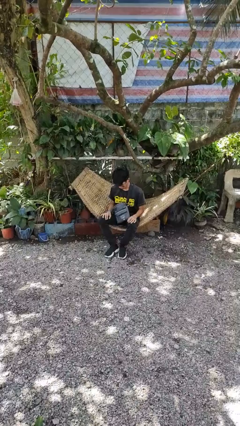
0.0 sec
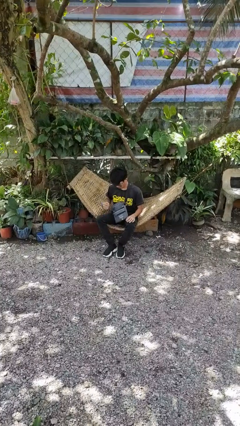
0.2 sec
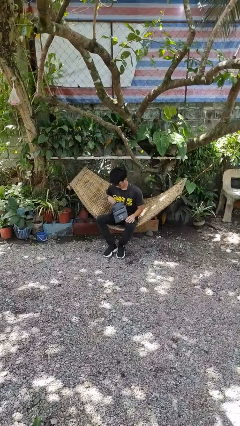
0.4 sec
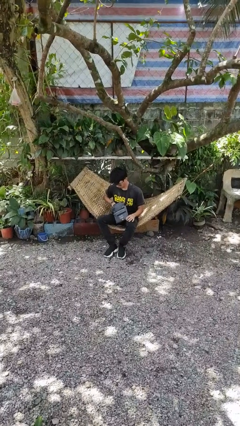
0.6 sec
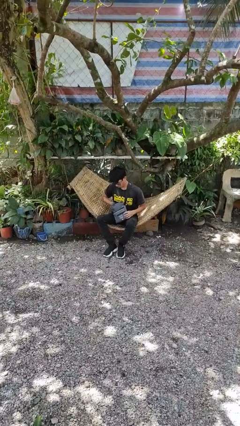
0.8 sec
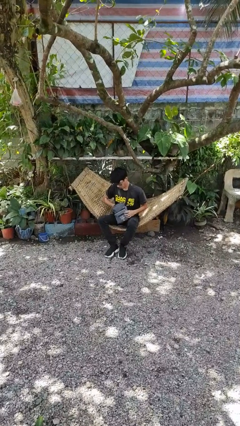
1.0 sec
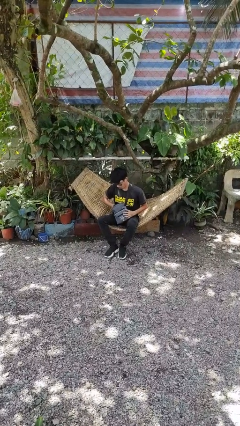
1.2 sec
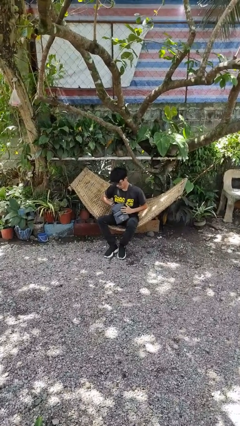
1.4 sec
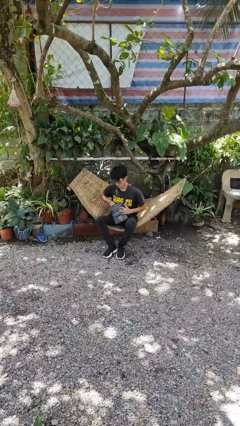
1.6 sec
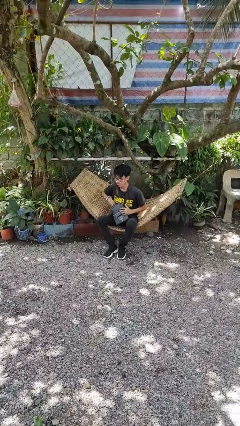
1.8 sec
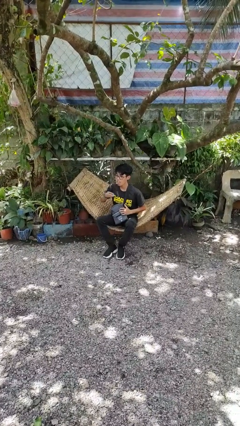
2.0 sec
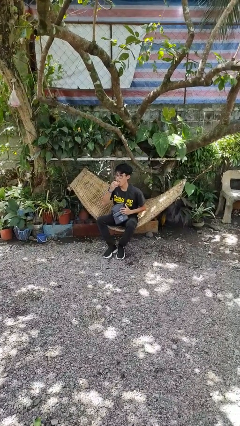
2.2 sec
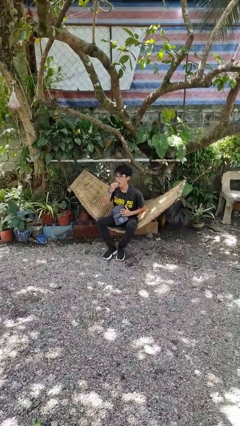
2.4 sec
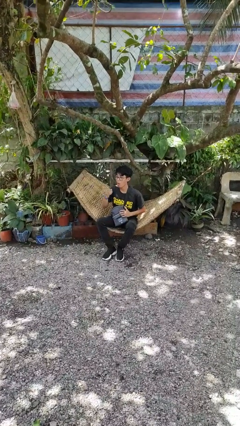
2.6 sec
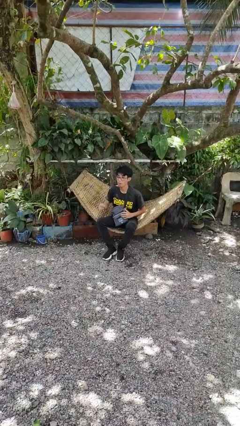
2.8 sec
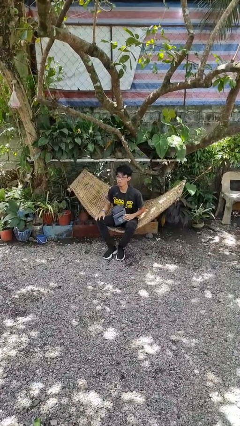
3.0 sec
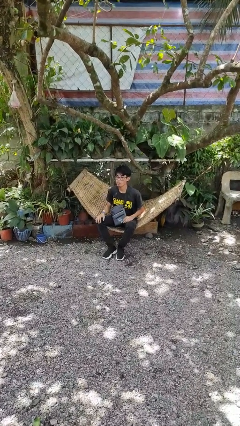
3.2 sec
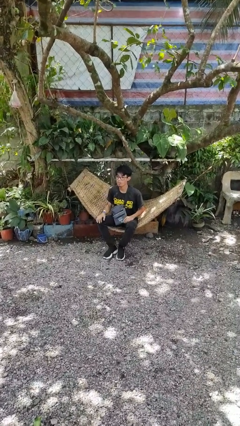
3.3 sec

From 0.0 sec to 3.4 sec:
person eats snack from bag

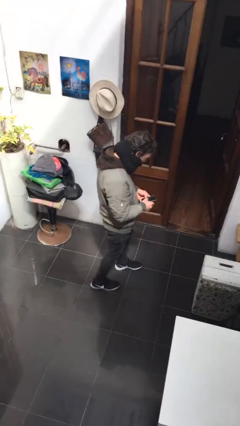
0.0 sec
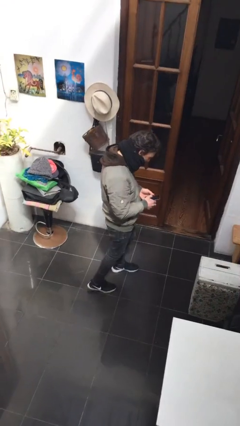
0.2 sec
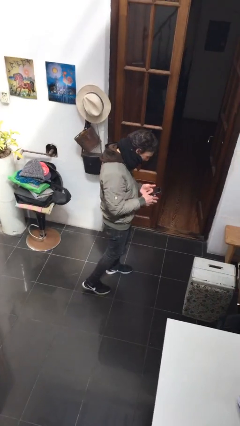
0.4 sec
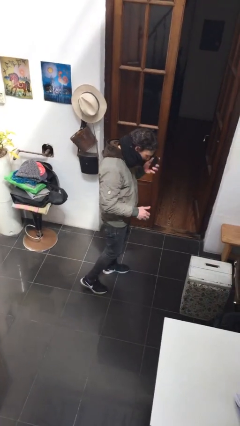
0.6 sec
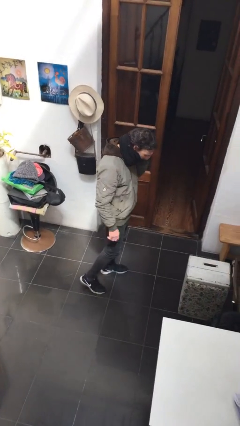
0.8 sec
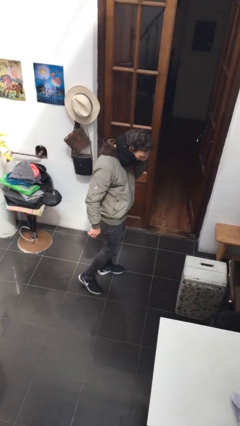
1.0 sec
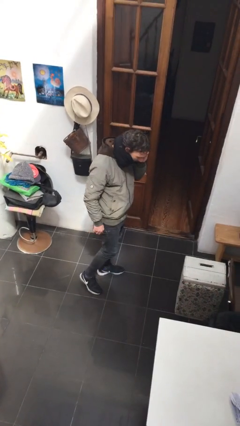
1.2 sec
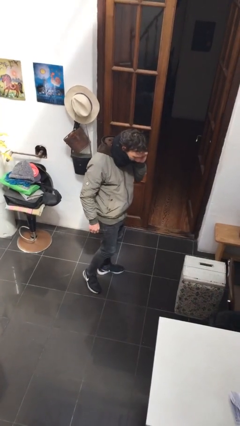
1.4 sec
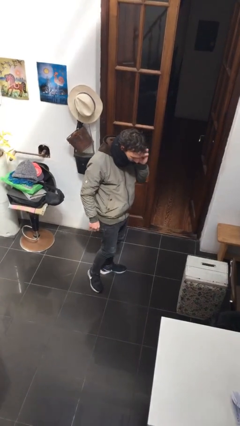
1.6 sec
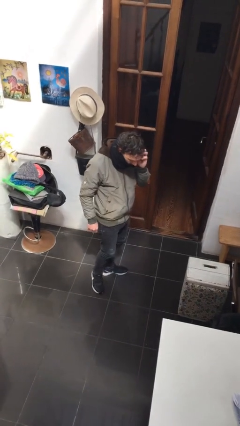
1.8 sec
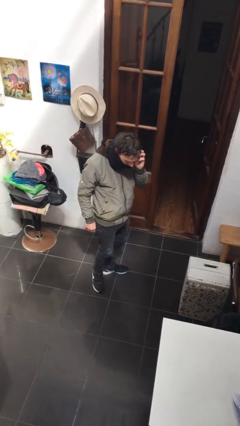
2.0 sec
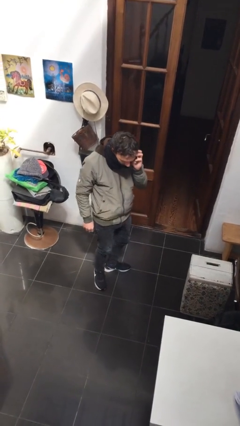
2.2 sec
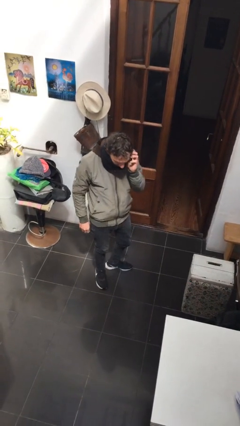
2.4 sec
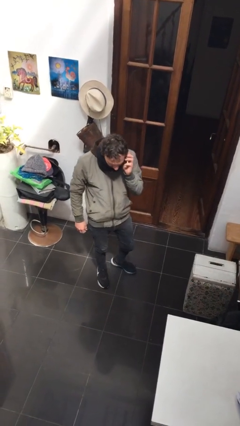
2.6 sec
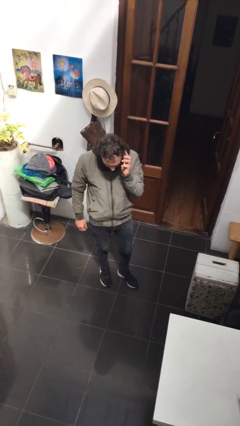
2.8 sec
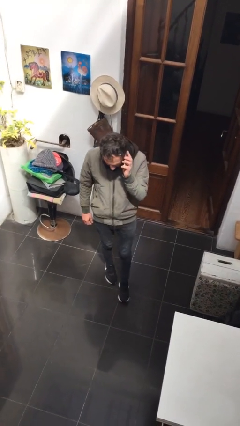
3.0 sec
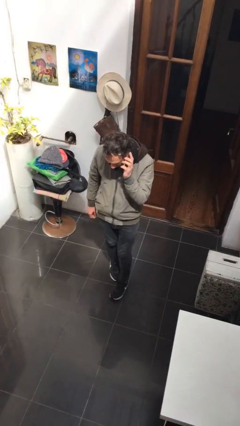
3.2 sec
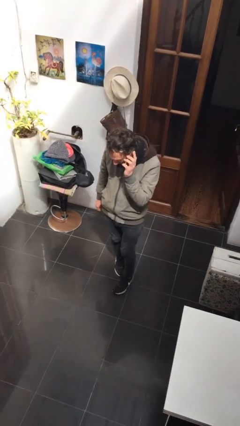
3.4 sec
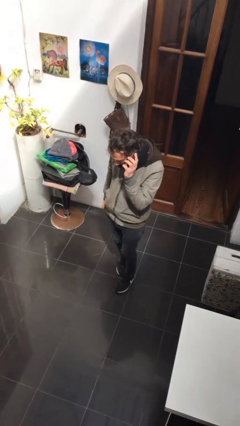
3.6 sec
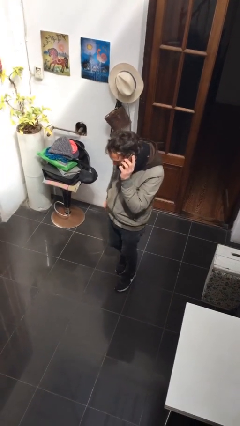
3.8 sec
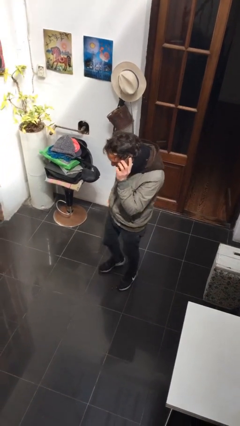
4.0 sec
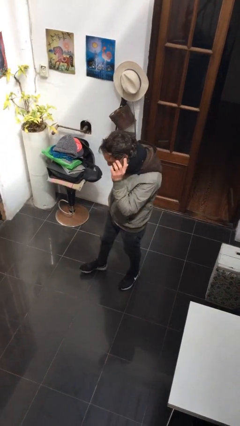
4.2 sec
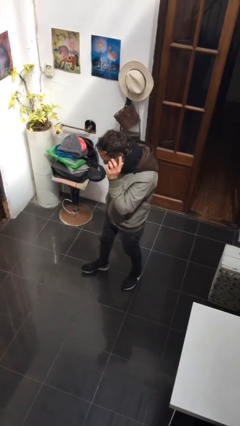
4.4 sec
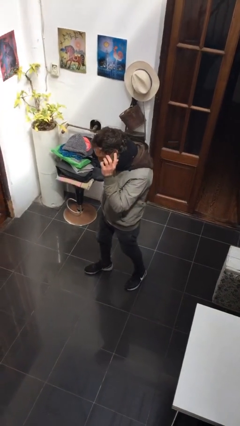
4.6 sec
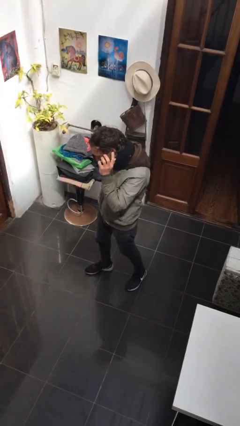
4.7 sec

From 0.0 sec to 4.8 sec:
person talks on phone

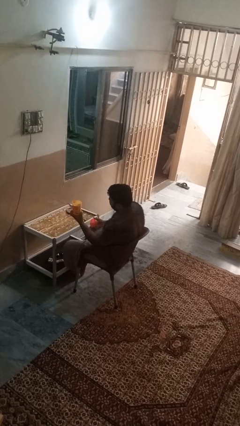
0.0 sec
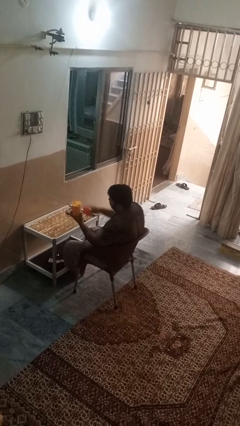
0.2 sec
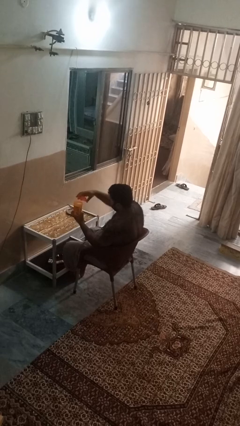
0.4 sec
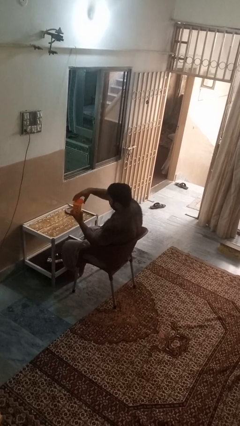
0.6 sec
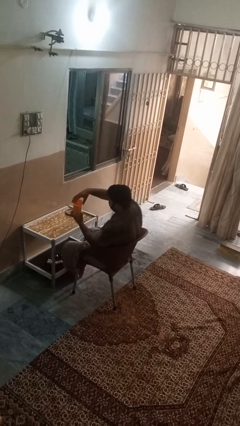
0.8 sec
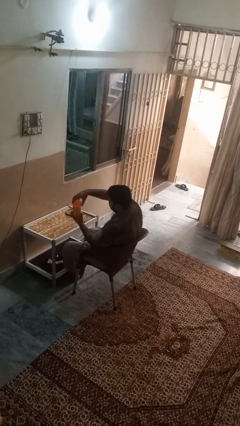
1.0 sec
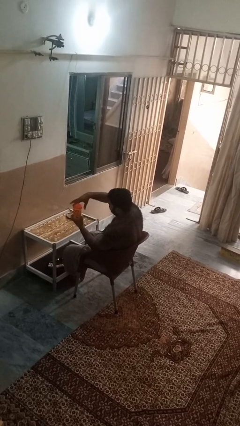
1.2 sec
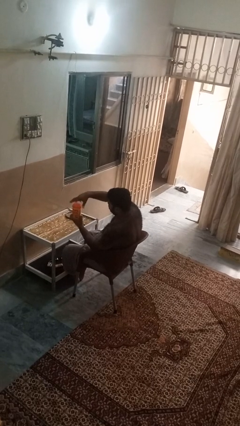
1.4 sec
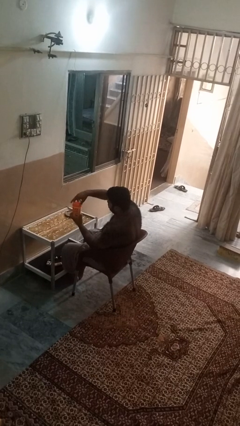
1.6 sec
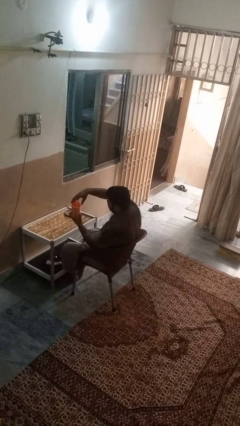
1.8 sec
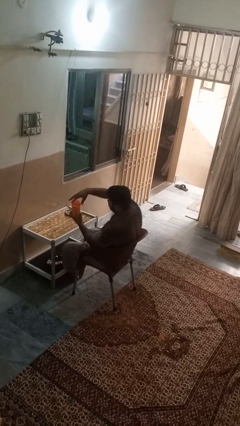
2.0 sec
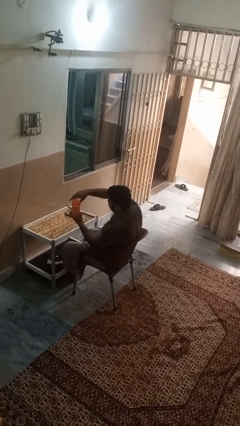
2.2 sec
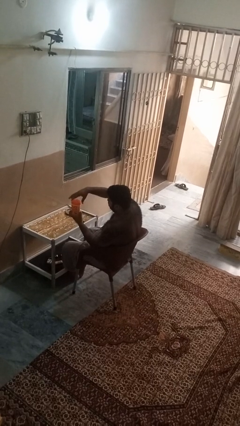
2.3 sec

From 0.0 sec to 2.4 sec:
person closes jar

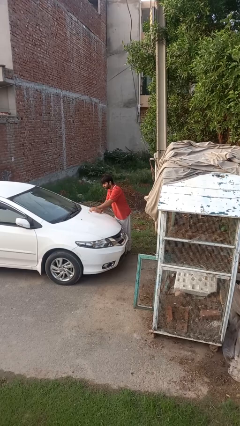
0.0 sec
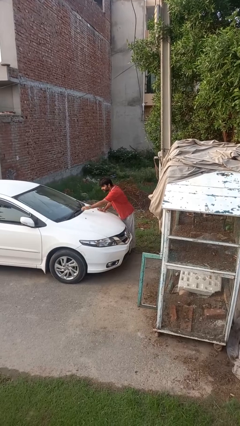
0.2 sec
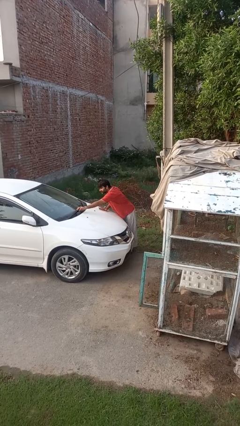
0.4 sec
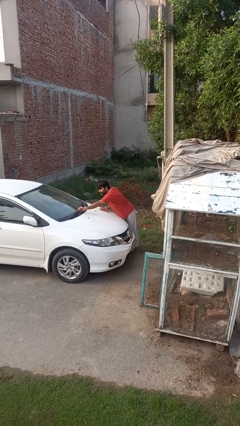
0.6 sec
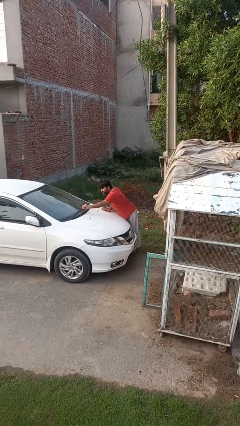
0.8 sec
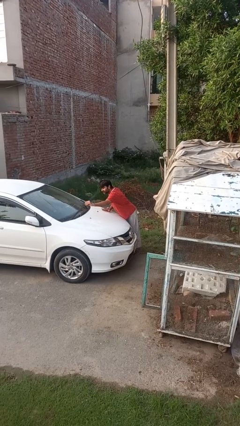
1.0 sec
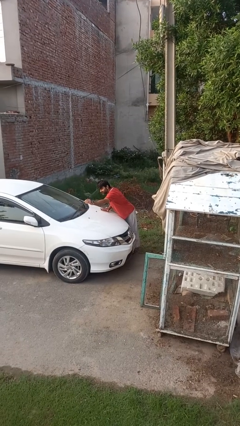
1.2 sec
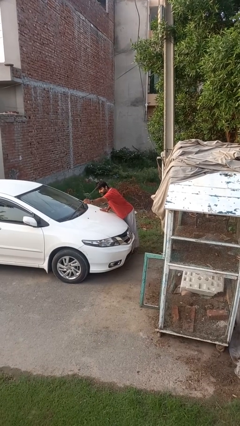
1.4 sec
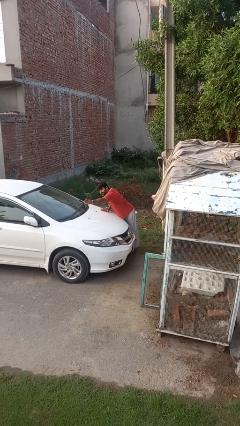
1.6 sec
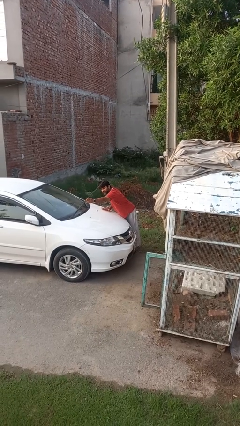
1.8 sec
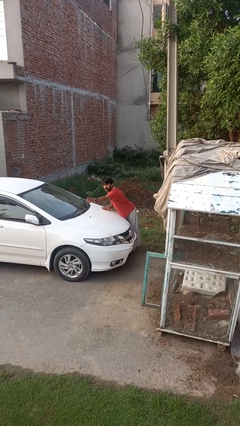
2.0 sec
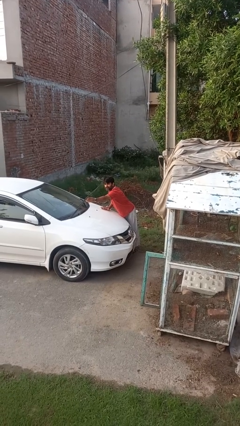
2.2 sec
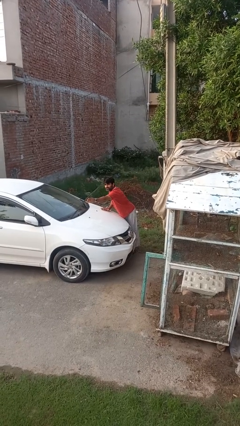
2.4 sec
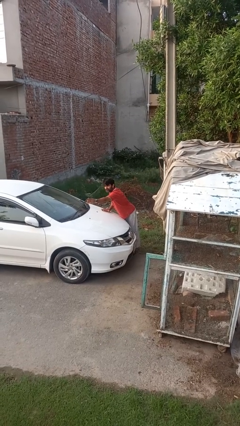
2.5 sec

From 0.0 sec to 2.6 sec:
person flips up car wipers

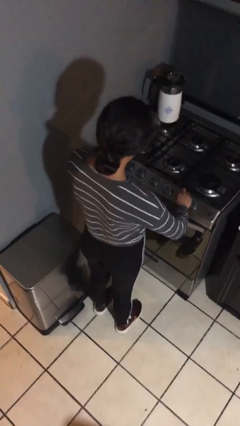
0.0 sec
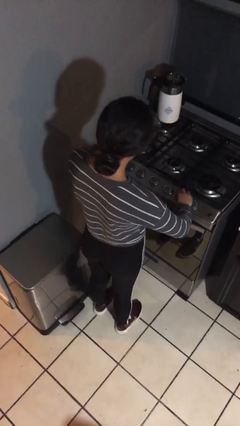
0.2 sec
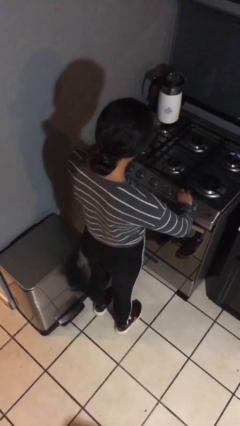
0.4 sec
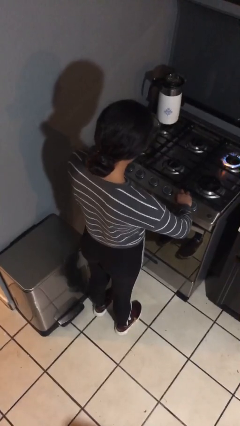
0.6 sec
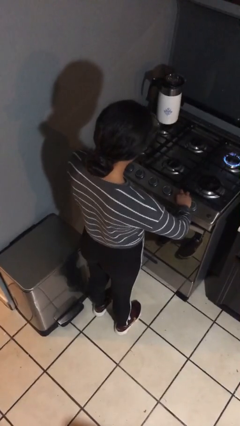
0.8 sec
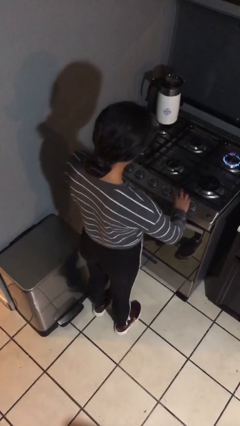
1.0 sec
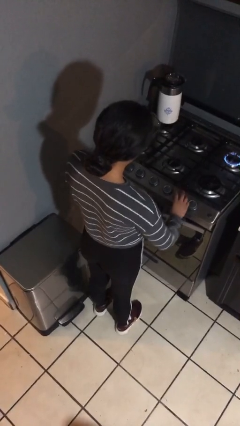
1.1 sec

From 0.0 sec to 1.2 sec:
person turns on stovetop

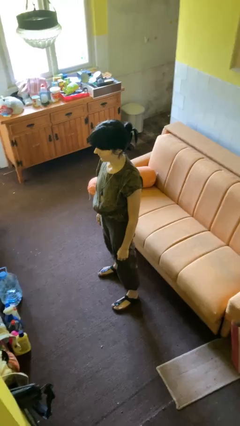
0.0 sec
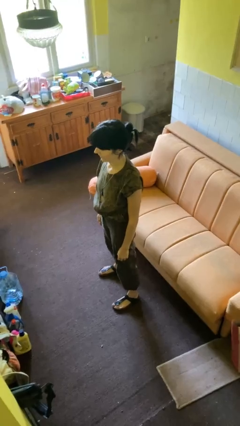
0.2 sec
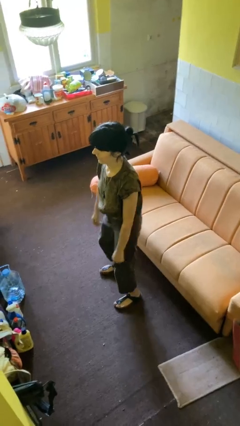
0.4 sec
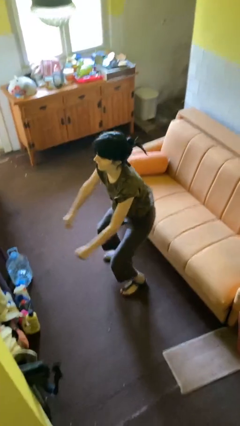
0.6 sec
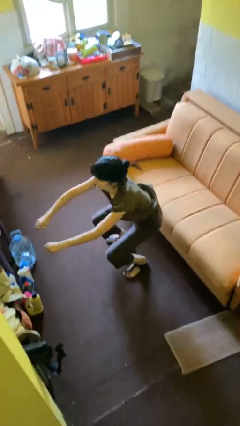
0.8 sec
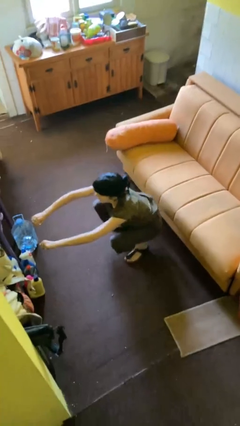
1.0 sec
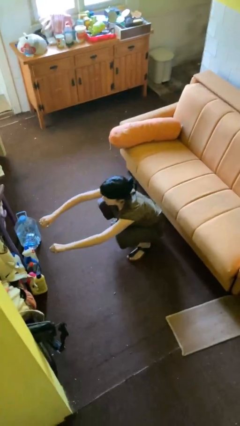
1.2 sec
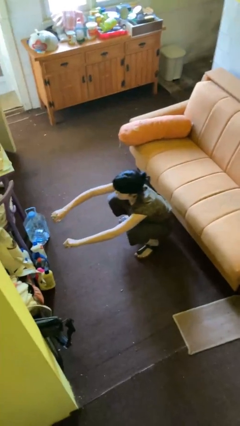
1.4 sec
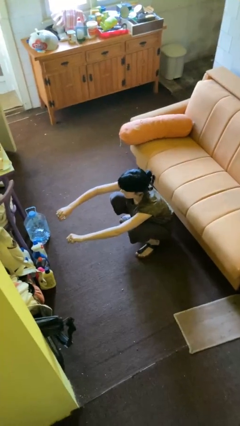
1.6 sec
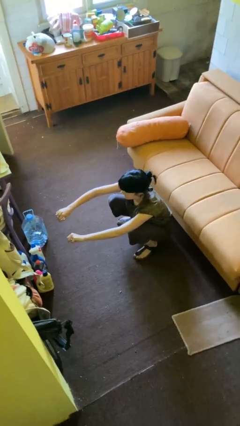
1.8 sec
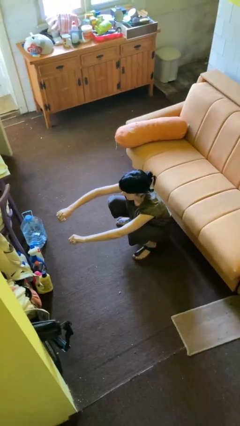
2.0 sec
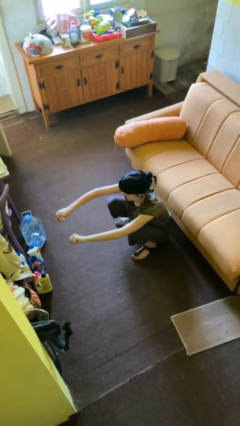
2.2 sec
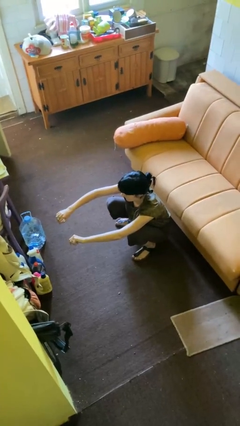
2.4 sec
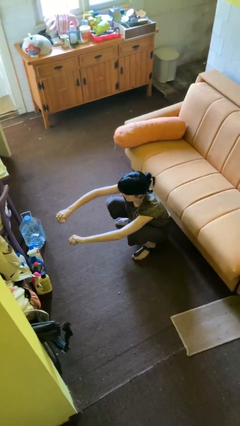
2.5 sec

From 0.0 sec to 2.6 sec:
person squats

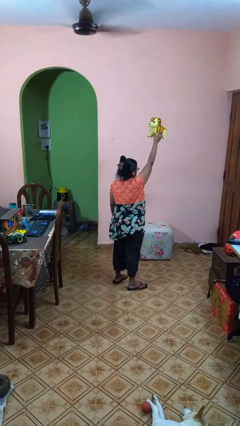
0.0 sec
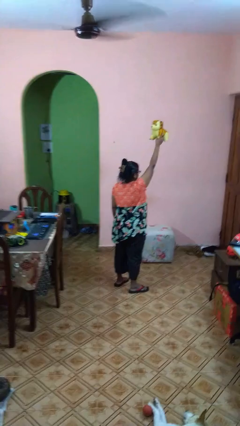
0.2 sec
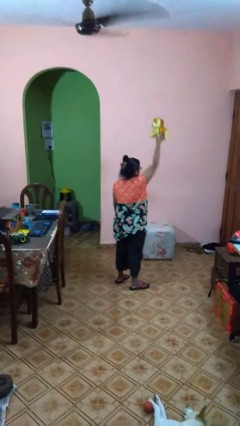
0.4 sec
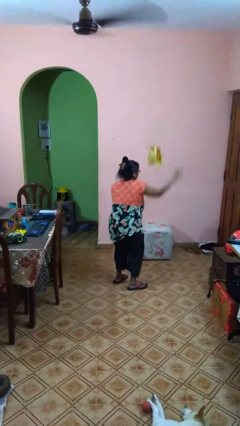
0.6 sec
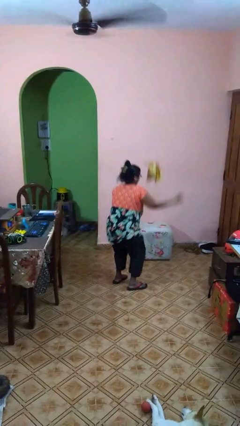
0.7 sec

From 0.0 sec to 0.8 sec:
person drops object
